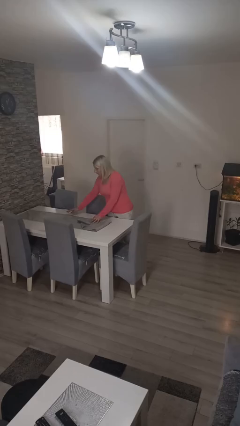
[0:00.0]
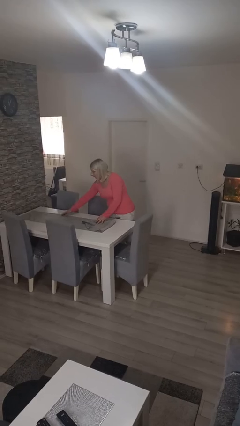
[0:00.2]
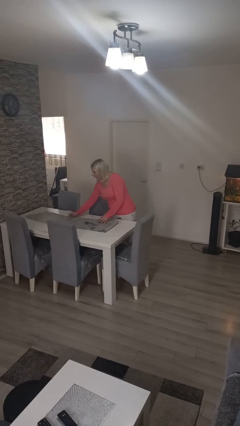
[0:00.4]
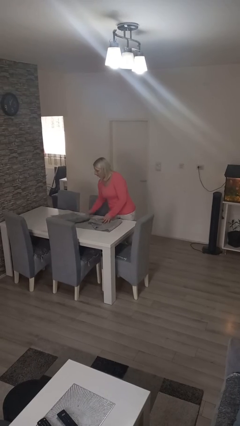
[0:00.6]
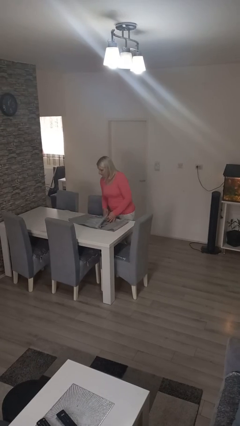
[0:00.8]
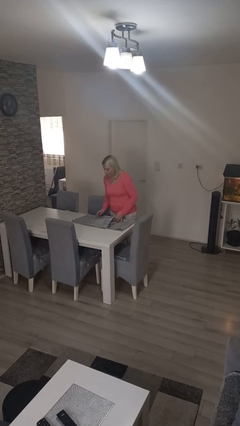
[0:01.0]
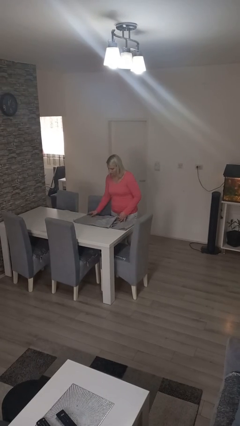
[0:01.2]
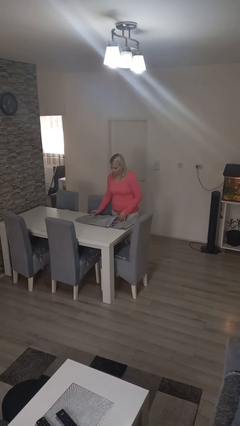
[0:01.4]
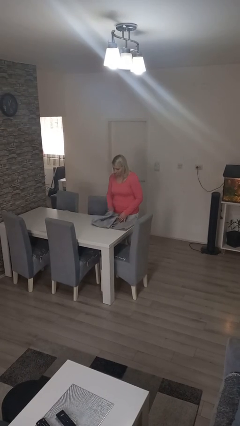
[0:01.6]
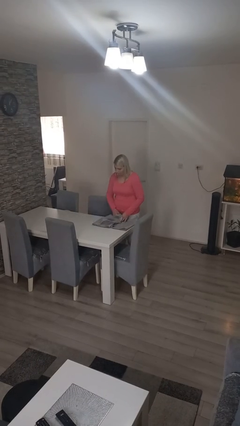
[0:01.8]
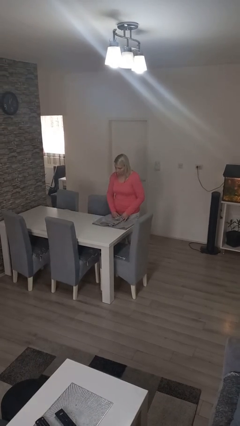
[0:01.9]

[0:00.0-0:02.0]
person folds tablecloth

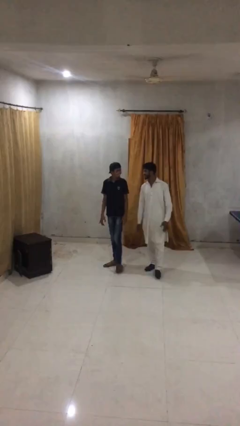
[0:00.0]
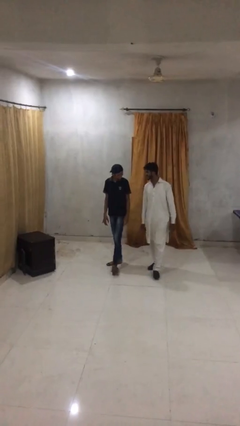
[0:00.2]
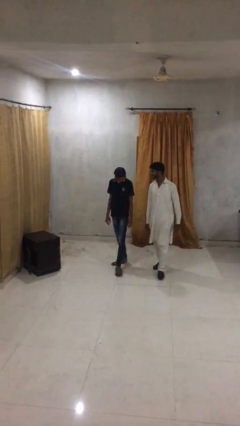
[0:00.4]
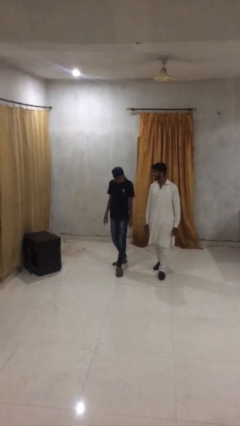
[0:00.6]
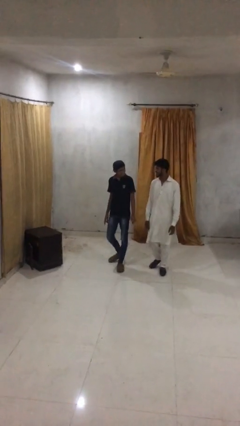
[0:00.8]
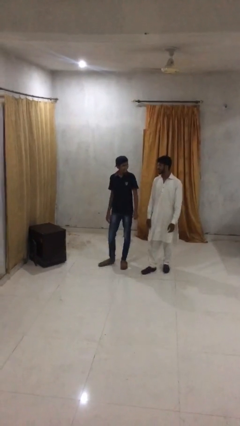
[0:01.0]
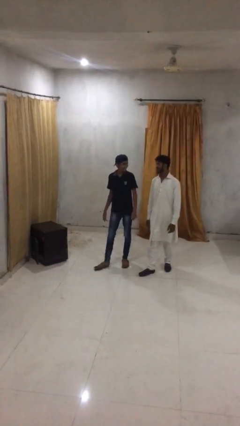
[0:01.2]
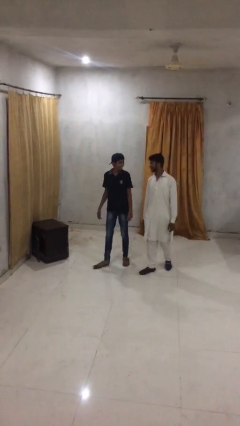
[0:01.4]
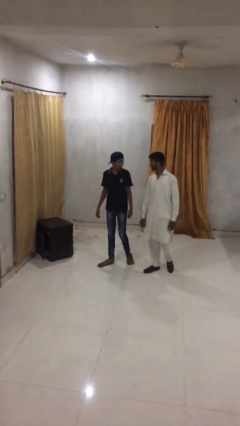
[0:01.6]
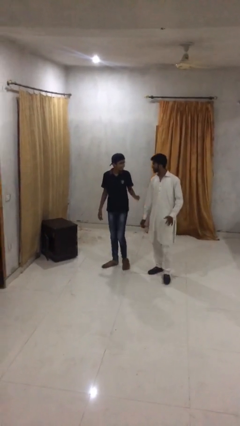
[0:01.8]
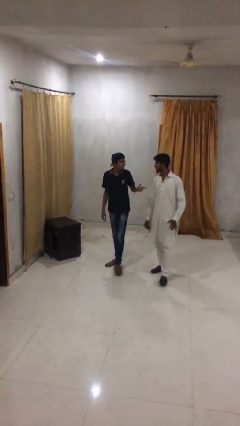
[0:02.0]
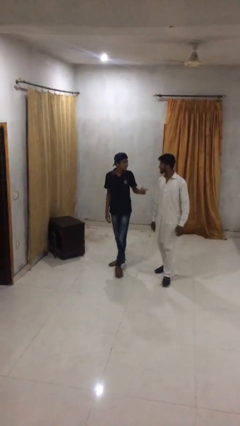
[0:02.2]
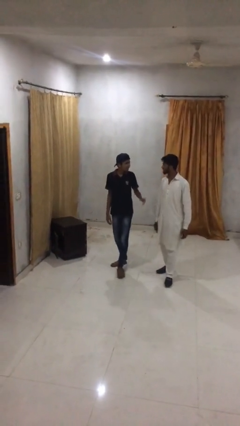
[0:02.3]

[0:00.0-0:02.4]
person talks to person

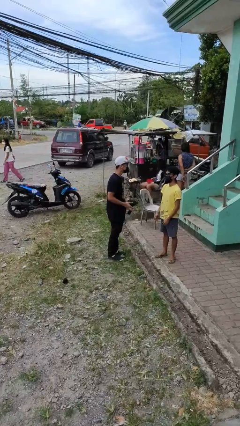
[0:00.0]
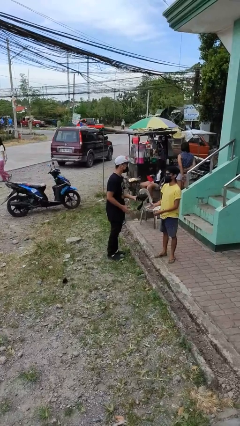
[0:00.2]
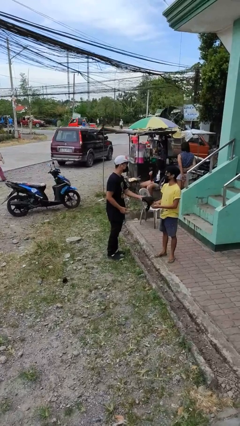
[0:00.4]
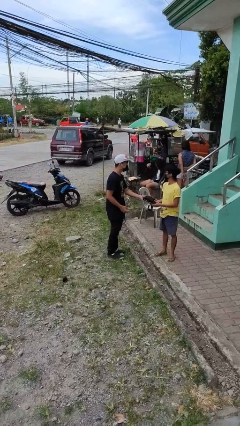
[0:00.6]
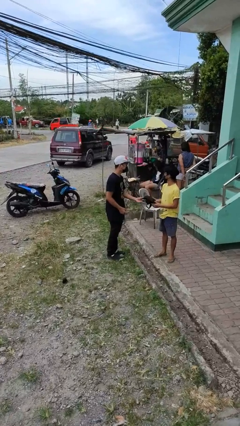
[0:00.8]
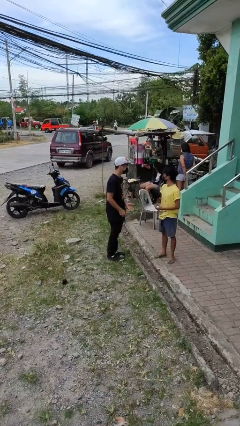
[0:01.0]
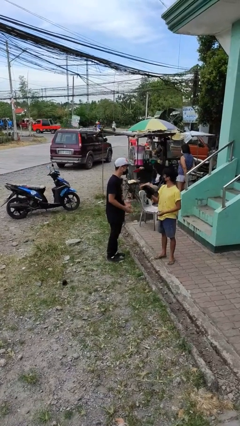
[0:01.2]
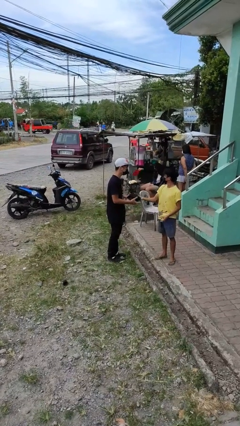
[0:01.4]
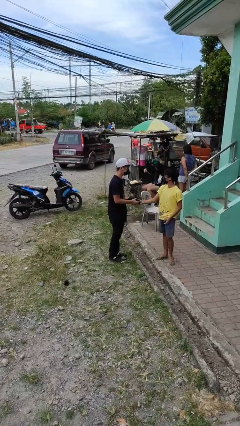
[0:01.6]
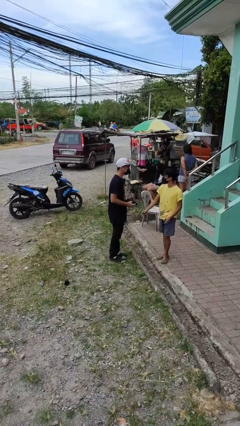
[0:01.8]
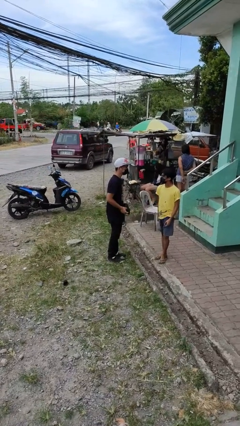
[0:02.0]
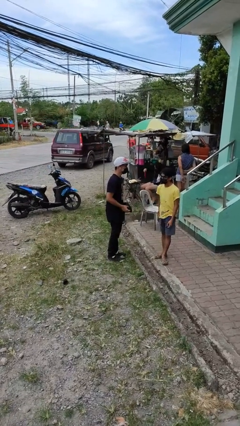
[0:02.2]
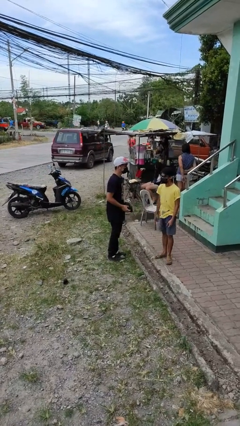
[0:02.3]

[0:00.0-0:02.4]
person transfers object to person

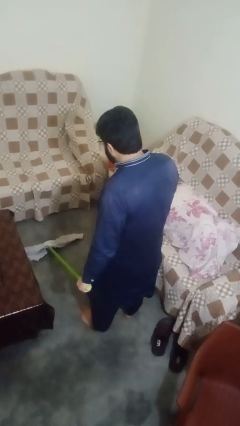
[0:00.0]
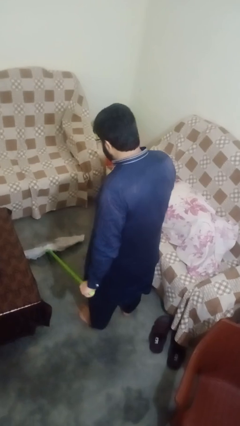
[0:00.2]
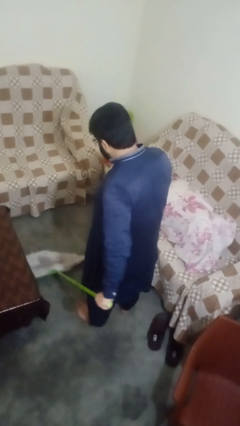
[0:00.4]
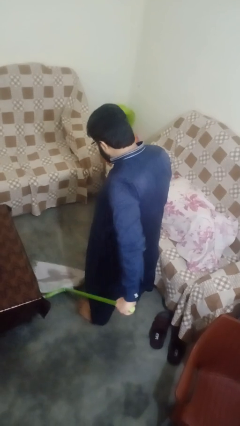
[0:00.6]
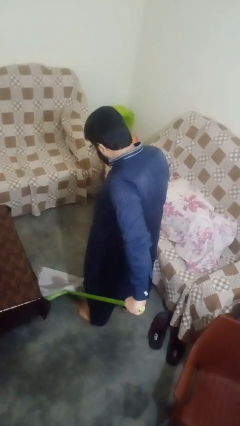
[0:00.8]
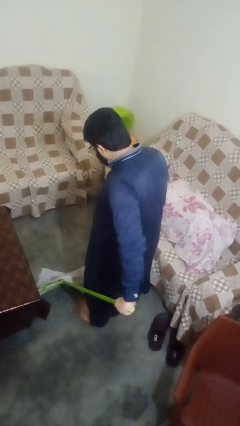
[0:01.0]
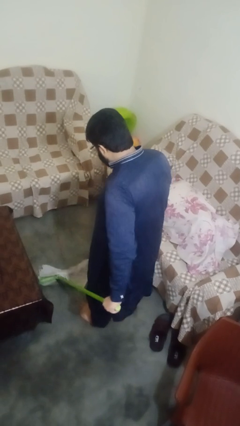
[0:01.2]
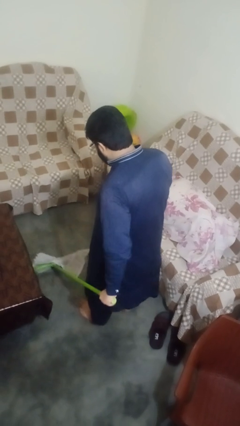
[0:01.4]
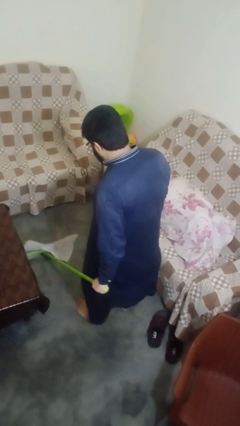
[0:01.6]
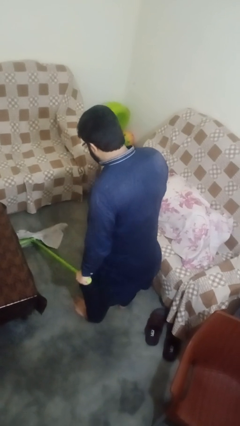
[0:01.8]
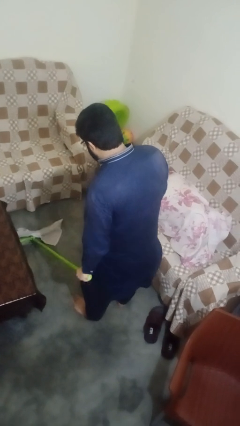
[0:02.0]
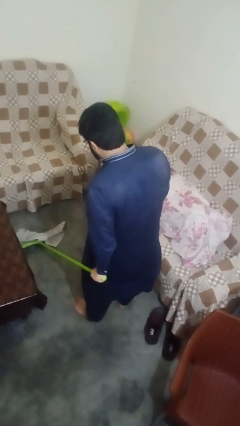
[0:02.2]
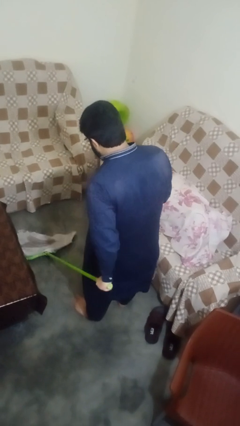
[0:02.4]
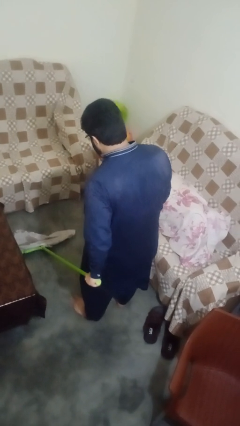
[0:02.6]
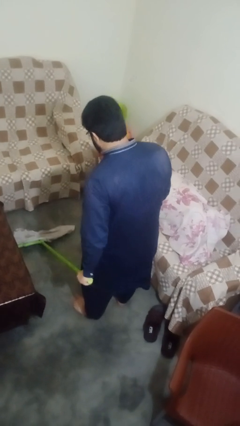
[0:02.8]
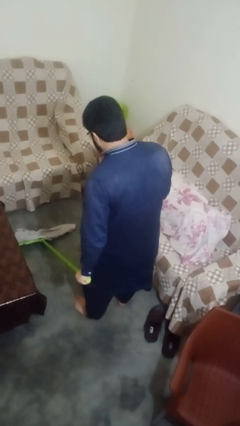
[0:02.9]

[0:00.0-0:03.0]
person mops

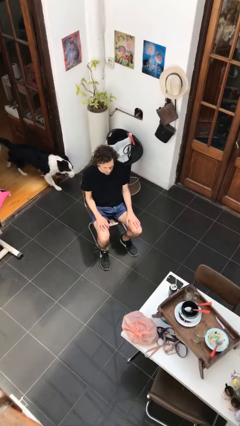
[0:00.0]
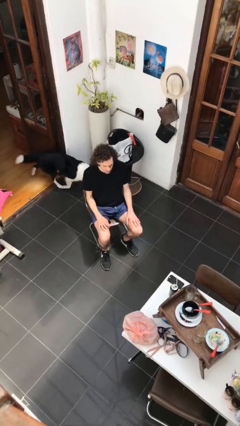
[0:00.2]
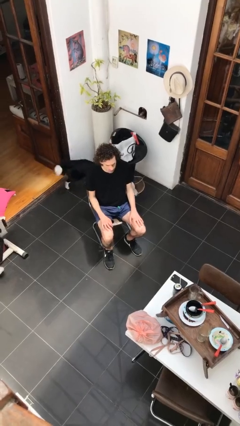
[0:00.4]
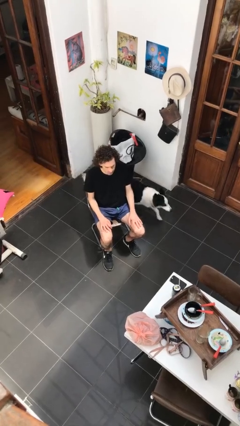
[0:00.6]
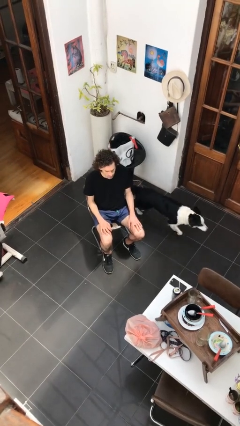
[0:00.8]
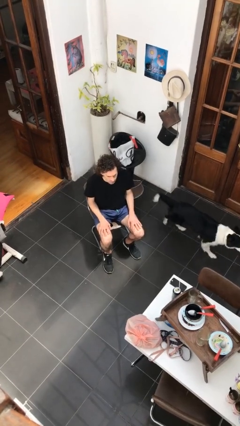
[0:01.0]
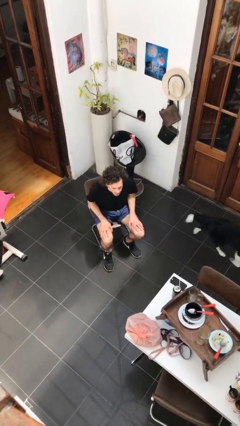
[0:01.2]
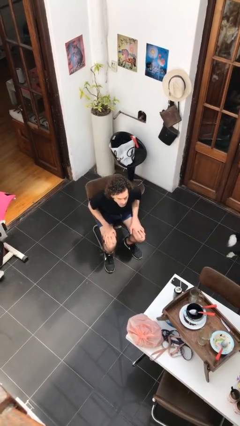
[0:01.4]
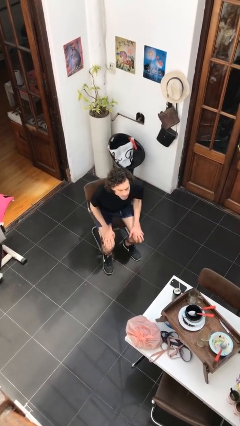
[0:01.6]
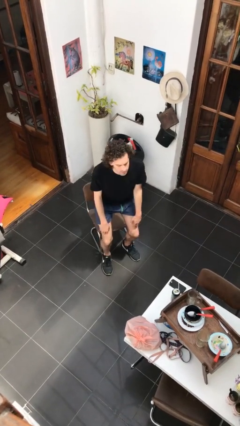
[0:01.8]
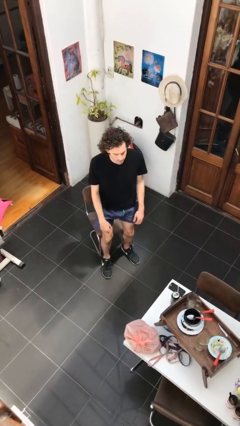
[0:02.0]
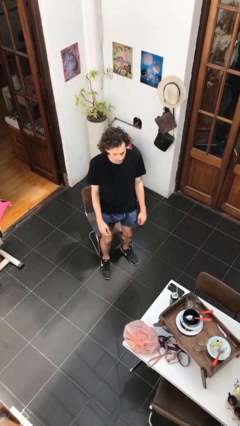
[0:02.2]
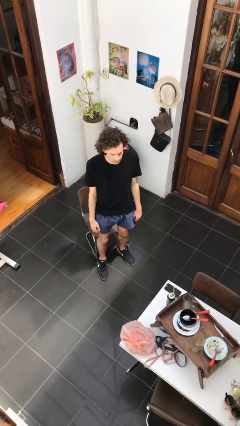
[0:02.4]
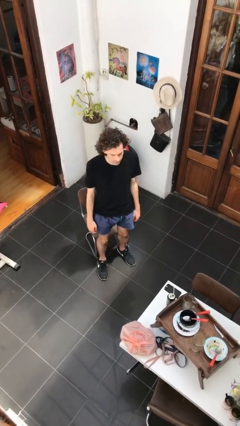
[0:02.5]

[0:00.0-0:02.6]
person stands up

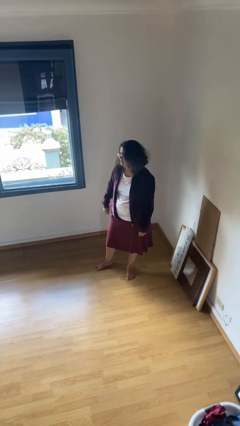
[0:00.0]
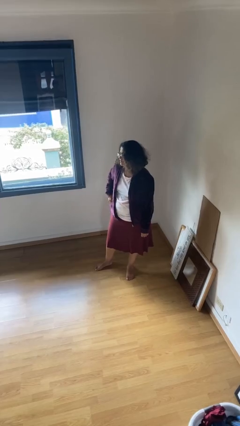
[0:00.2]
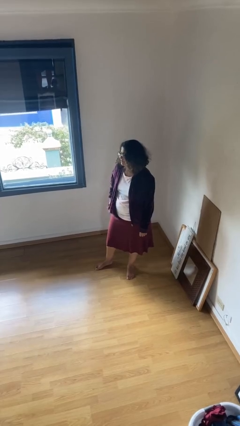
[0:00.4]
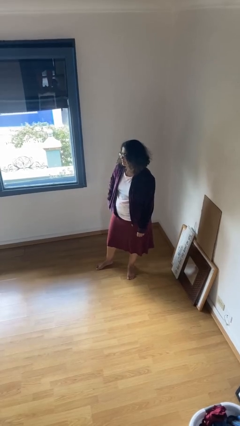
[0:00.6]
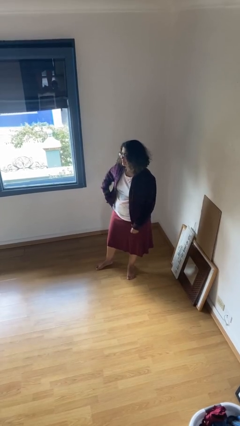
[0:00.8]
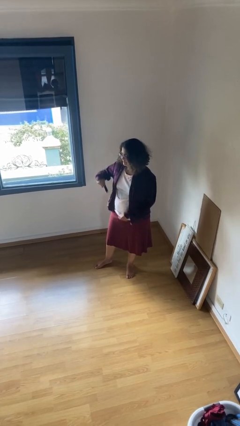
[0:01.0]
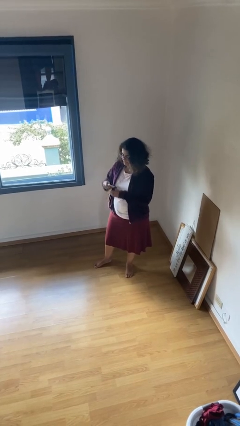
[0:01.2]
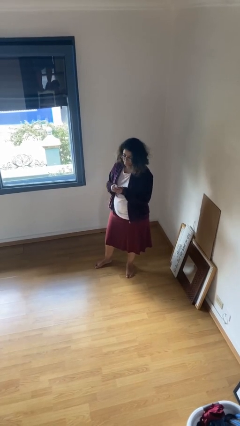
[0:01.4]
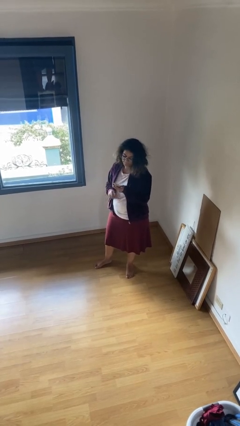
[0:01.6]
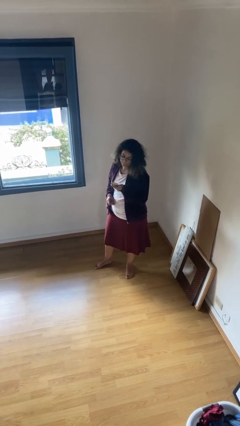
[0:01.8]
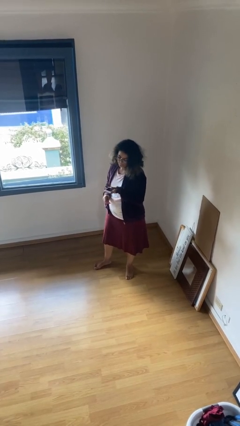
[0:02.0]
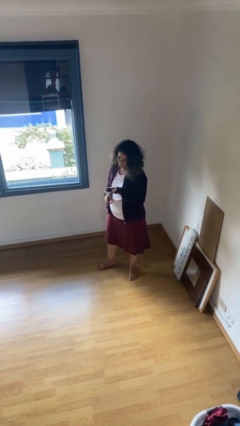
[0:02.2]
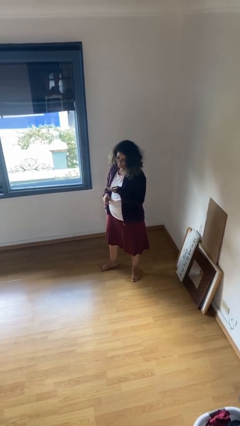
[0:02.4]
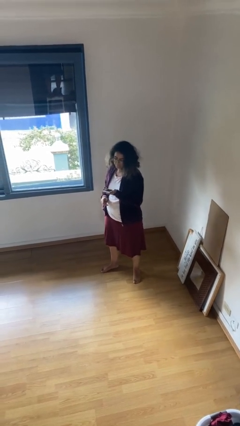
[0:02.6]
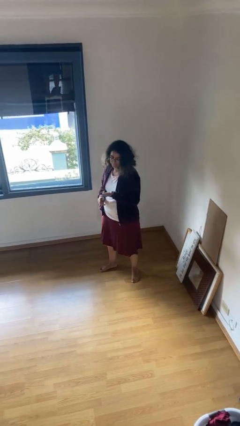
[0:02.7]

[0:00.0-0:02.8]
person takes phone from pocket

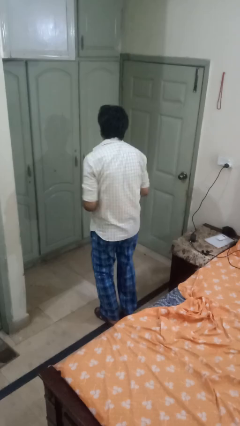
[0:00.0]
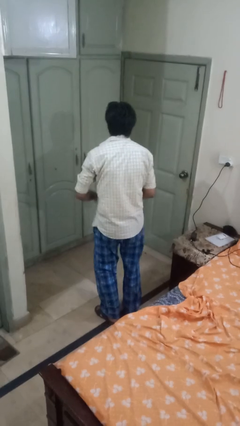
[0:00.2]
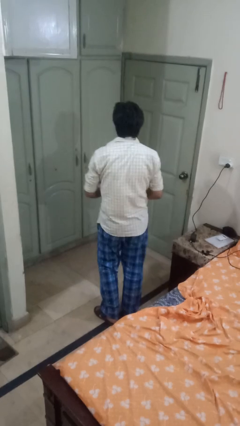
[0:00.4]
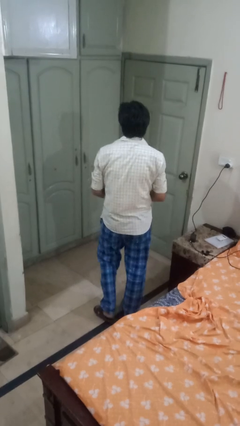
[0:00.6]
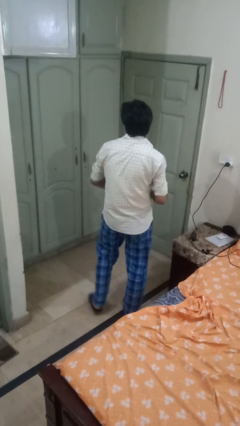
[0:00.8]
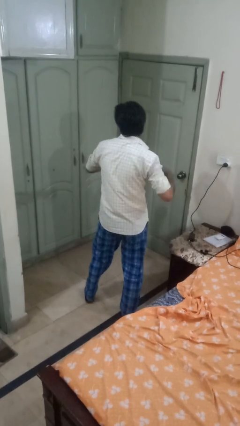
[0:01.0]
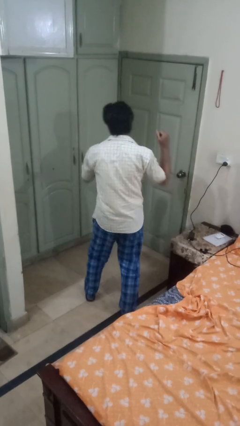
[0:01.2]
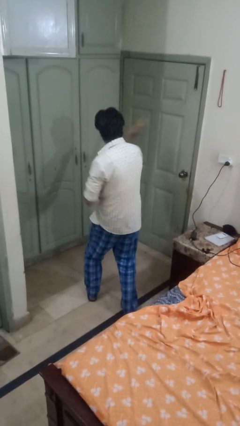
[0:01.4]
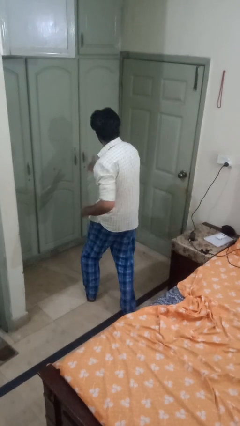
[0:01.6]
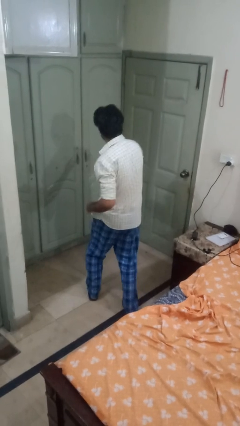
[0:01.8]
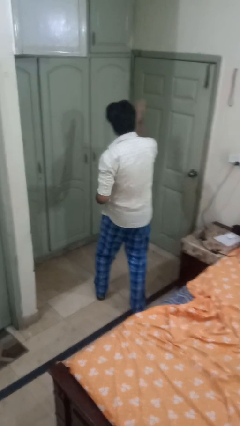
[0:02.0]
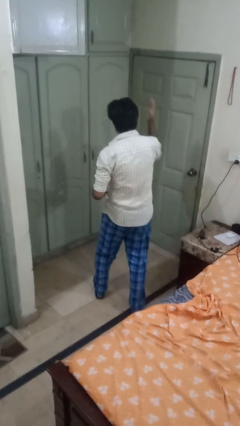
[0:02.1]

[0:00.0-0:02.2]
person karate chop
